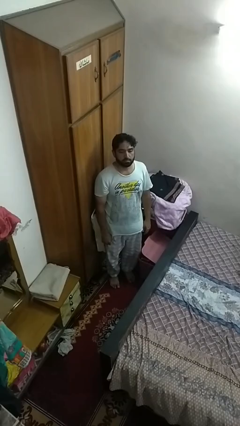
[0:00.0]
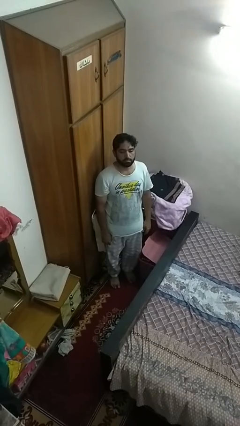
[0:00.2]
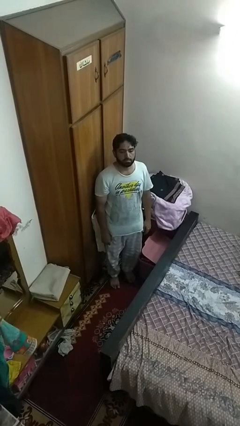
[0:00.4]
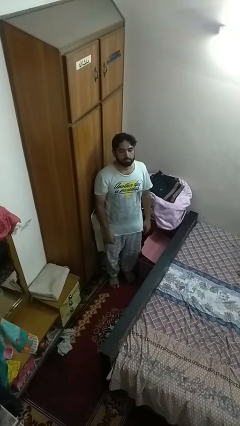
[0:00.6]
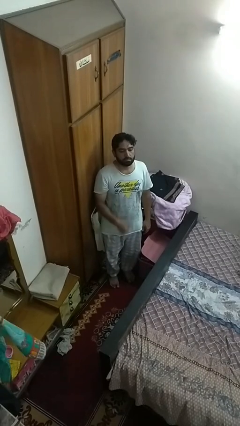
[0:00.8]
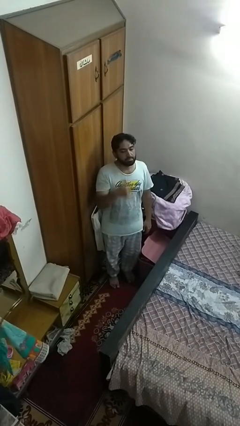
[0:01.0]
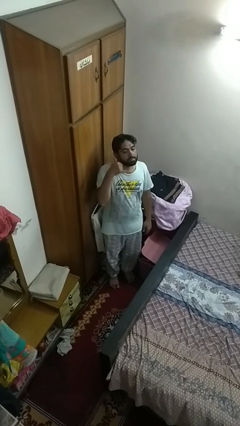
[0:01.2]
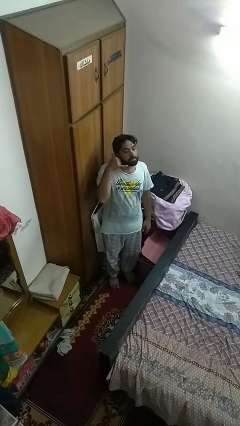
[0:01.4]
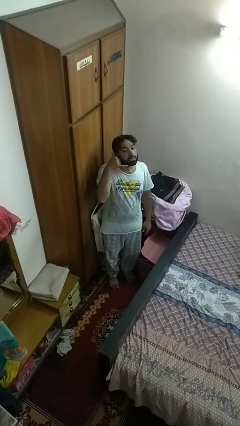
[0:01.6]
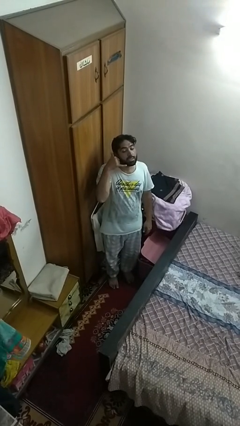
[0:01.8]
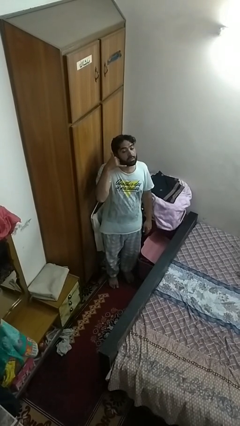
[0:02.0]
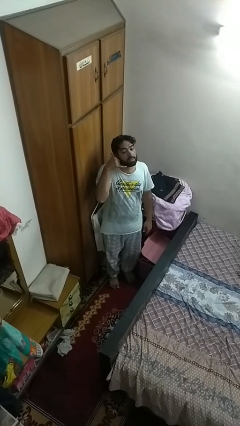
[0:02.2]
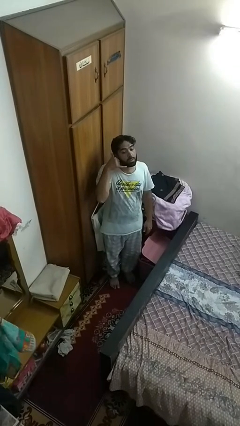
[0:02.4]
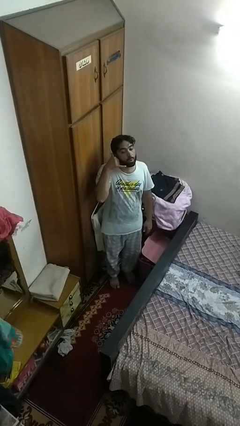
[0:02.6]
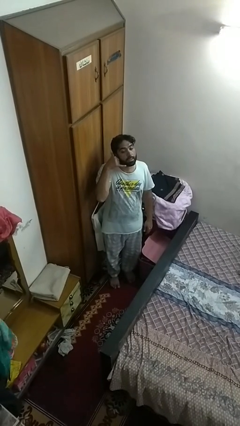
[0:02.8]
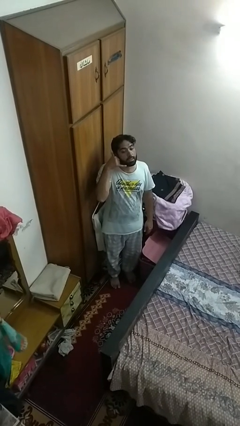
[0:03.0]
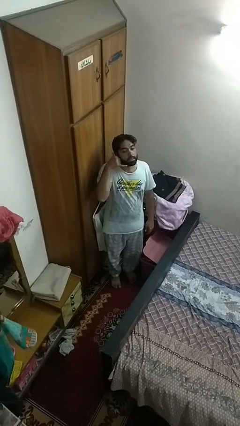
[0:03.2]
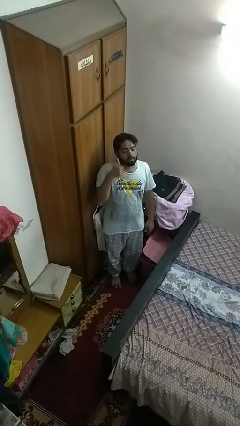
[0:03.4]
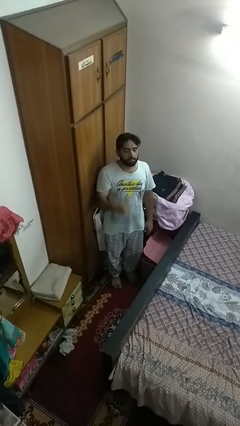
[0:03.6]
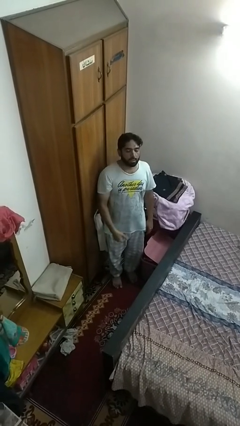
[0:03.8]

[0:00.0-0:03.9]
person gestures call me

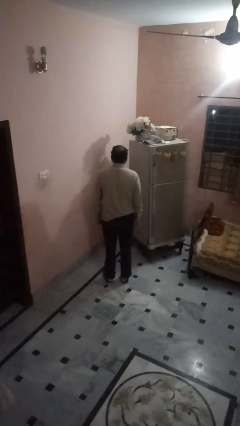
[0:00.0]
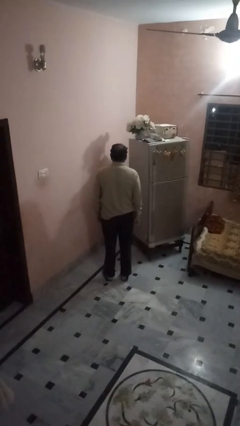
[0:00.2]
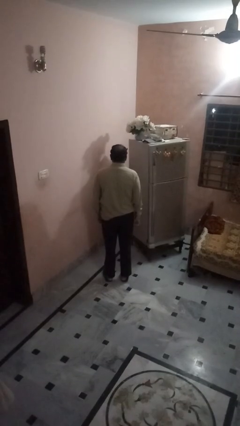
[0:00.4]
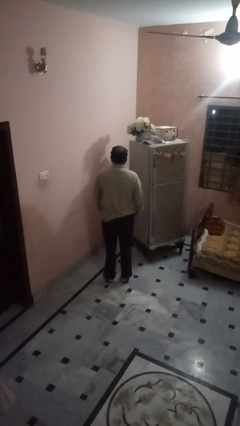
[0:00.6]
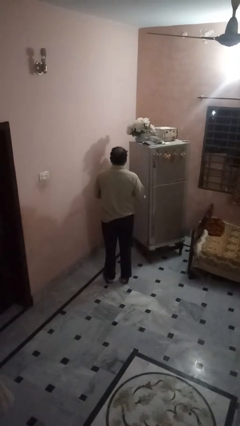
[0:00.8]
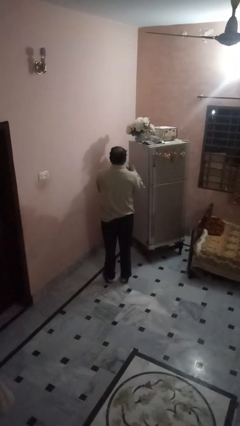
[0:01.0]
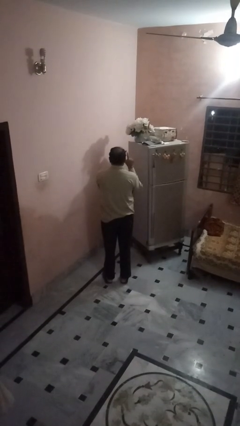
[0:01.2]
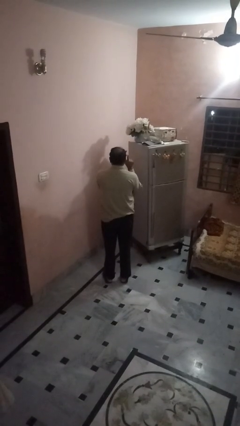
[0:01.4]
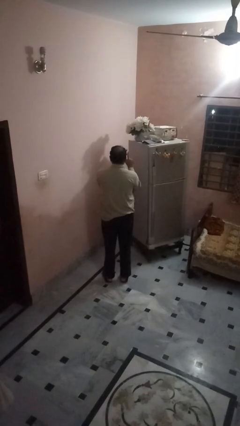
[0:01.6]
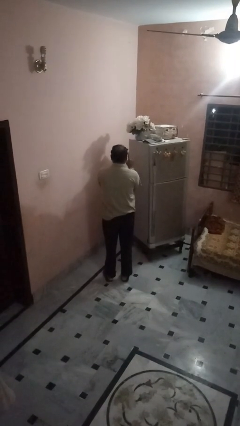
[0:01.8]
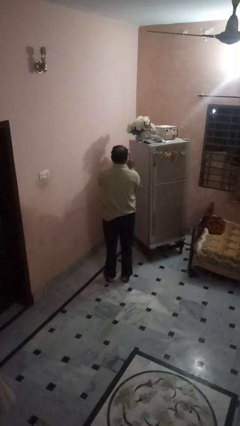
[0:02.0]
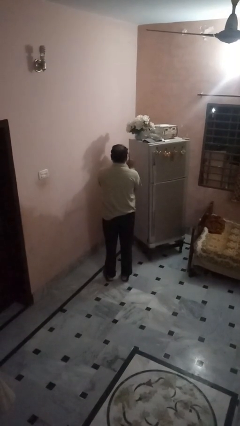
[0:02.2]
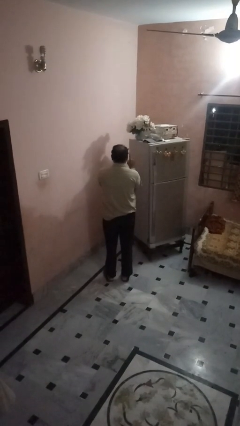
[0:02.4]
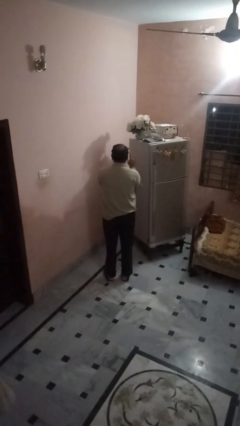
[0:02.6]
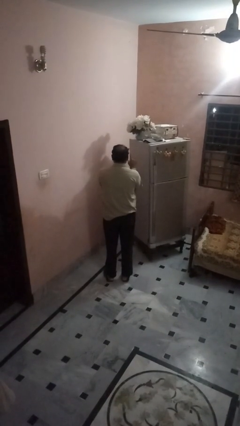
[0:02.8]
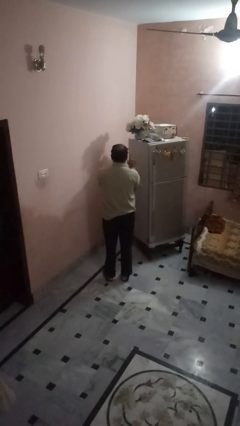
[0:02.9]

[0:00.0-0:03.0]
person gestures number one

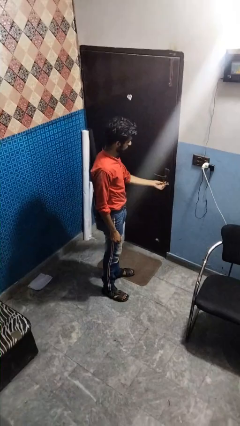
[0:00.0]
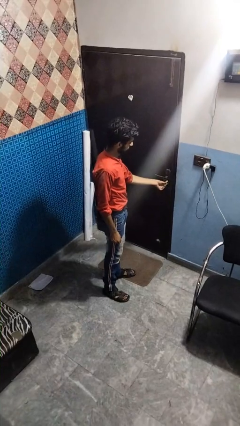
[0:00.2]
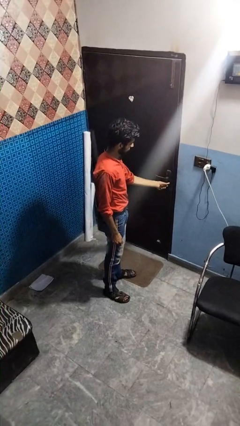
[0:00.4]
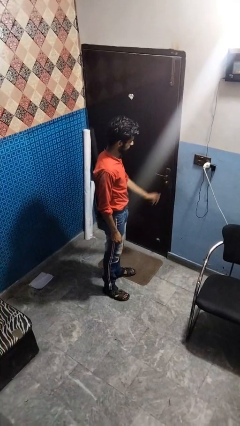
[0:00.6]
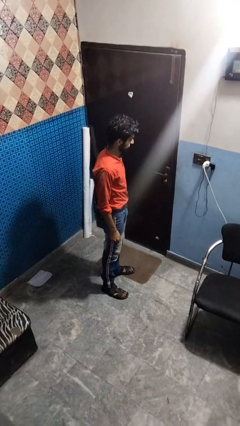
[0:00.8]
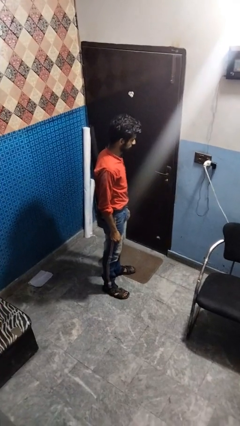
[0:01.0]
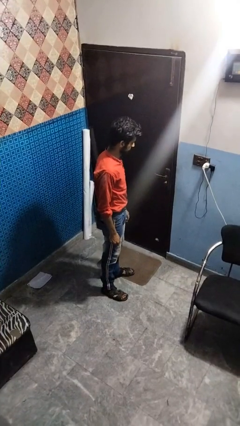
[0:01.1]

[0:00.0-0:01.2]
person locks door with keys

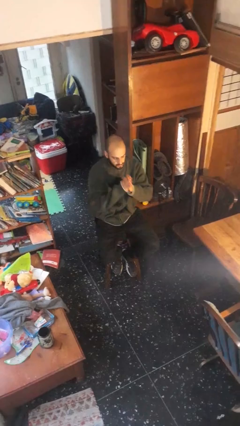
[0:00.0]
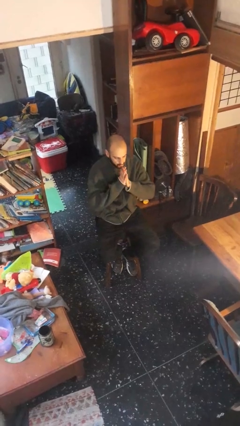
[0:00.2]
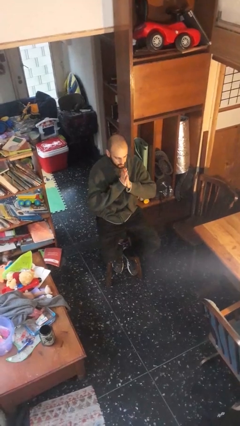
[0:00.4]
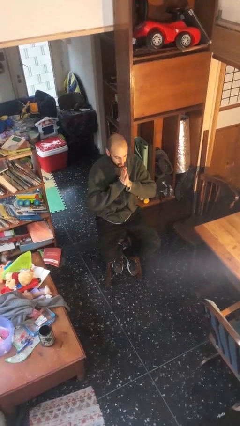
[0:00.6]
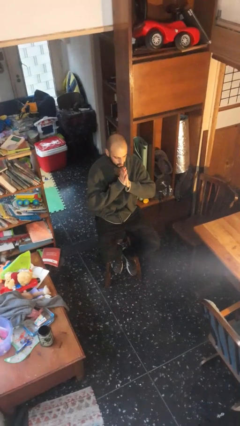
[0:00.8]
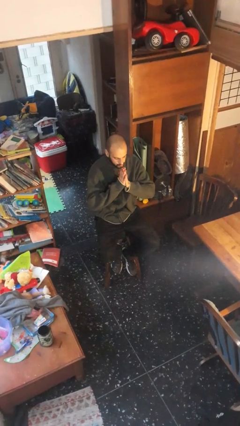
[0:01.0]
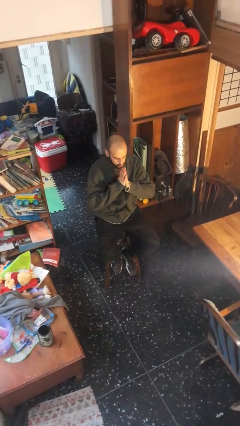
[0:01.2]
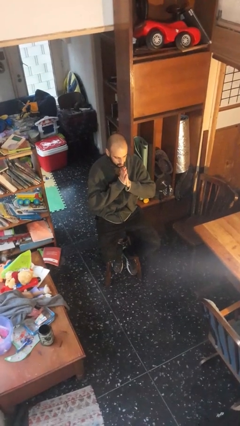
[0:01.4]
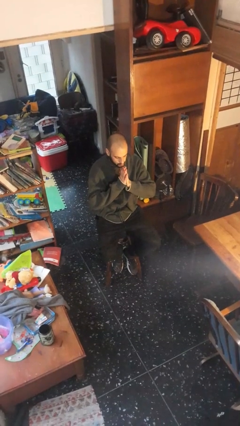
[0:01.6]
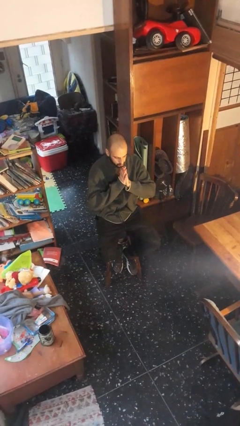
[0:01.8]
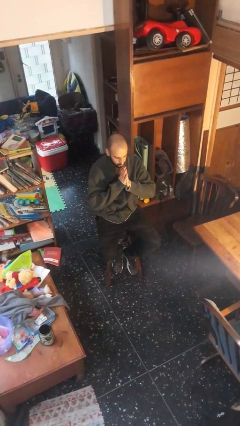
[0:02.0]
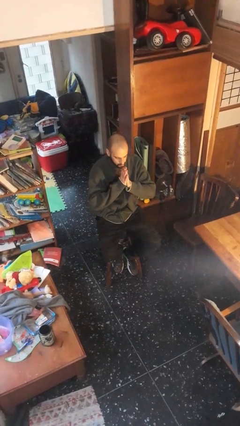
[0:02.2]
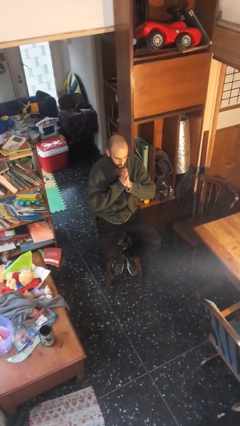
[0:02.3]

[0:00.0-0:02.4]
person prays

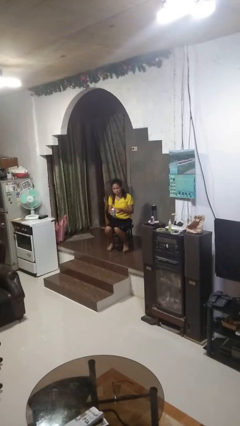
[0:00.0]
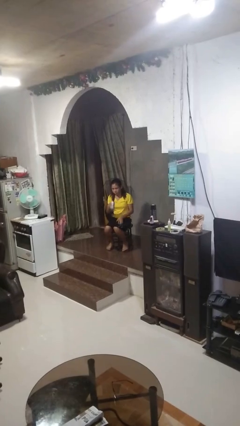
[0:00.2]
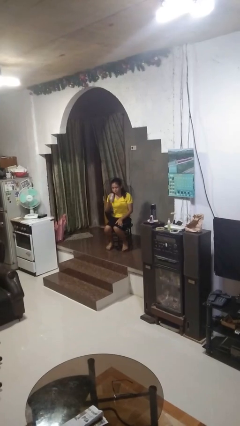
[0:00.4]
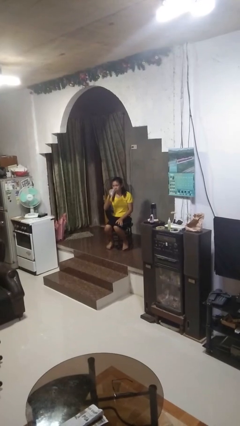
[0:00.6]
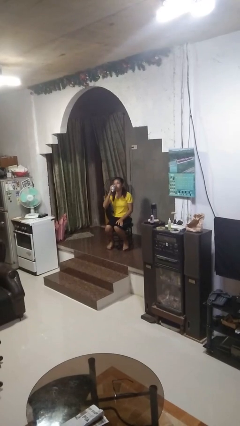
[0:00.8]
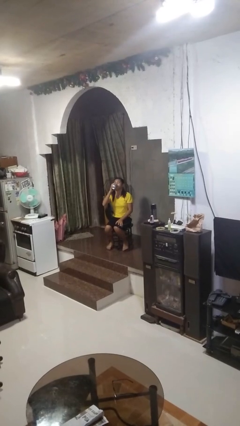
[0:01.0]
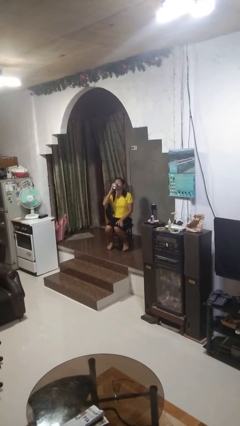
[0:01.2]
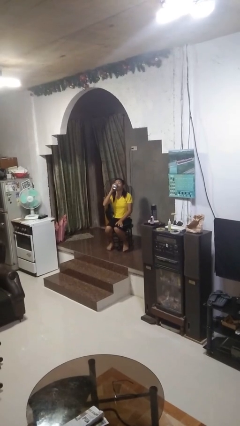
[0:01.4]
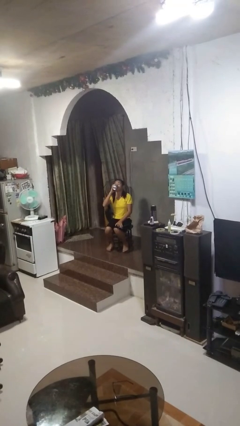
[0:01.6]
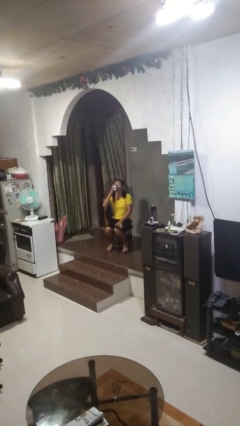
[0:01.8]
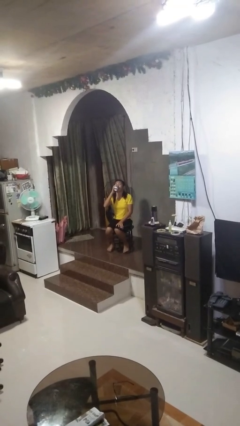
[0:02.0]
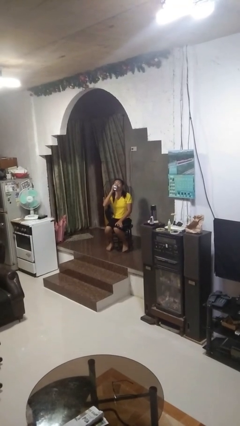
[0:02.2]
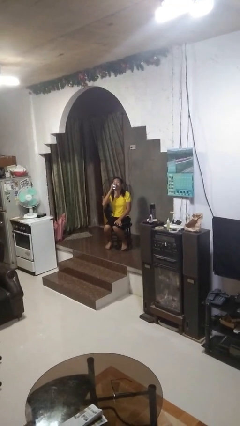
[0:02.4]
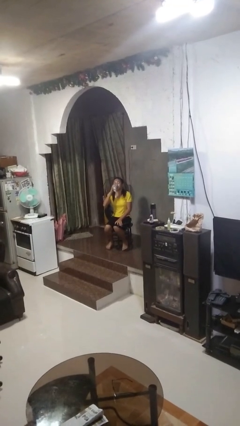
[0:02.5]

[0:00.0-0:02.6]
person drinks from beverage can

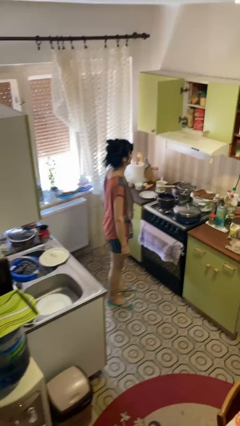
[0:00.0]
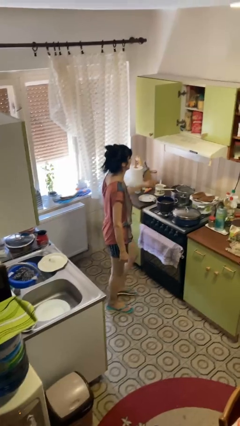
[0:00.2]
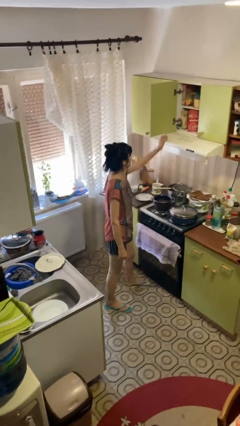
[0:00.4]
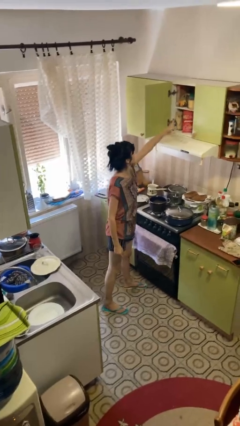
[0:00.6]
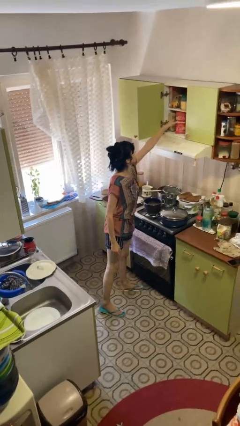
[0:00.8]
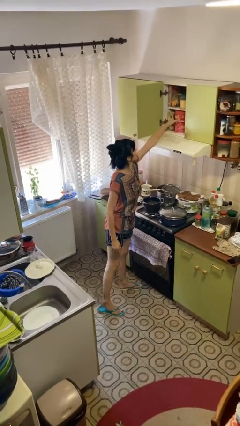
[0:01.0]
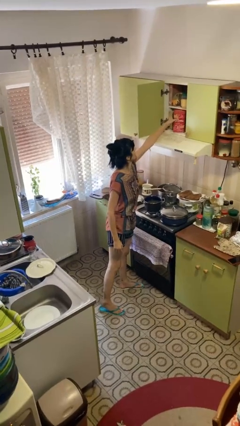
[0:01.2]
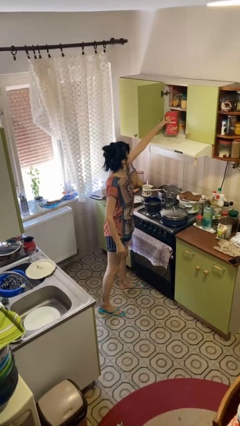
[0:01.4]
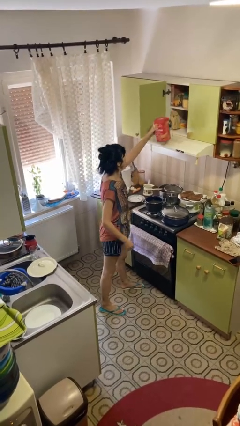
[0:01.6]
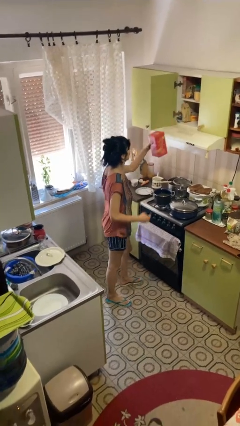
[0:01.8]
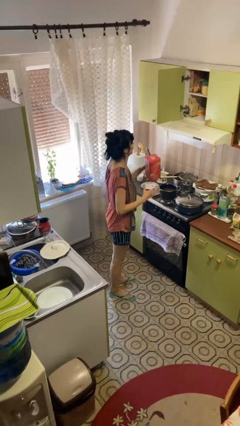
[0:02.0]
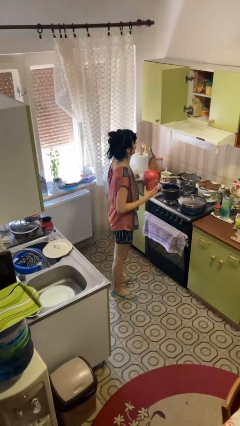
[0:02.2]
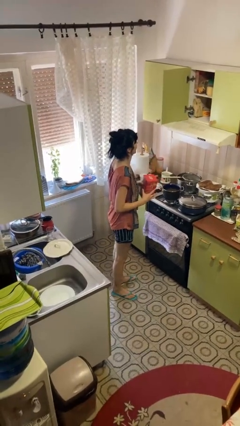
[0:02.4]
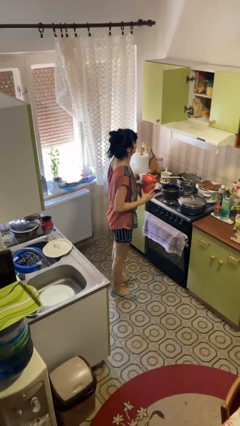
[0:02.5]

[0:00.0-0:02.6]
person picks up object from cabinet

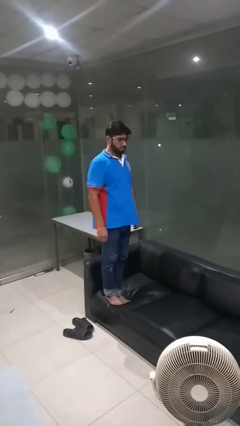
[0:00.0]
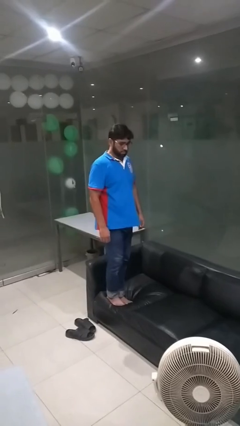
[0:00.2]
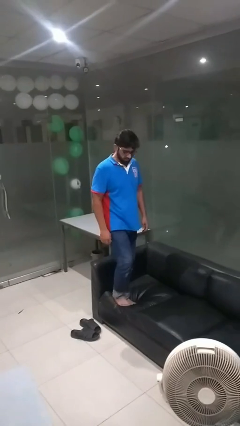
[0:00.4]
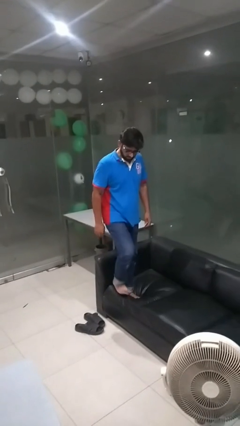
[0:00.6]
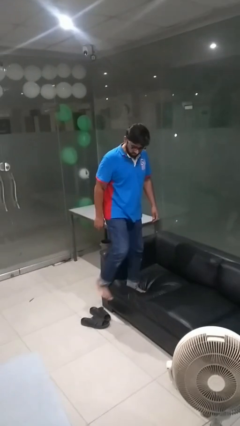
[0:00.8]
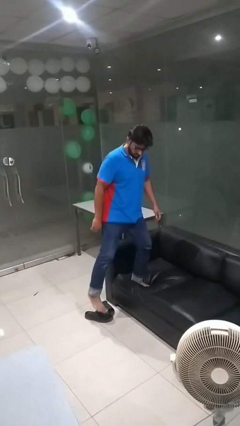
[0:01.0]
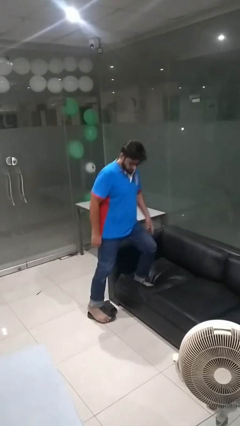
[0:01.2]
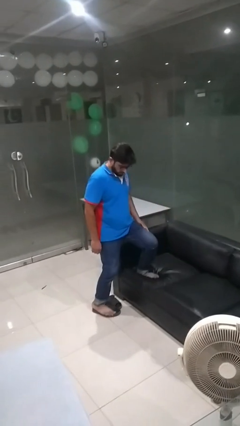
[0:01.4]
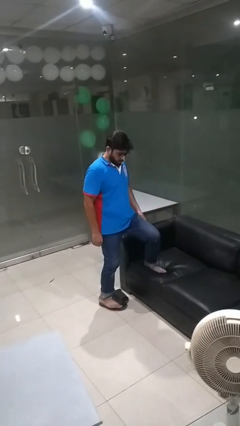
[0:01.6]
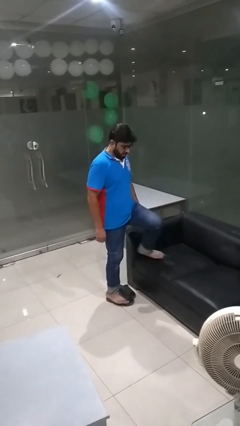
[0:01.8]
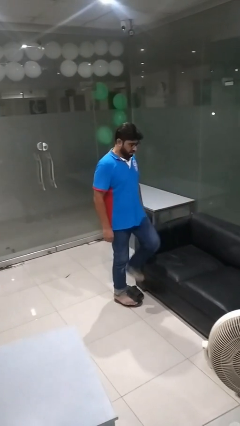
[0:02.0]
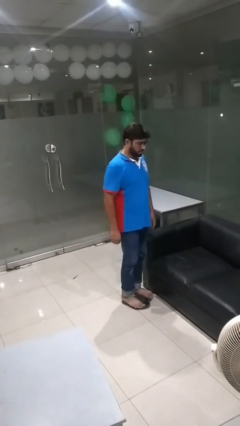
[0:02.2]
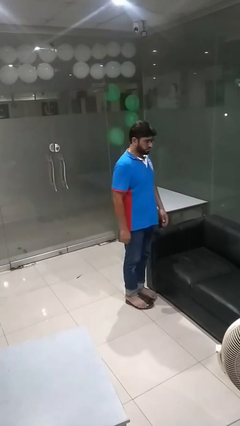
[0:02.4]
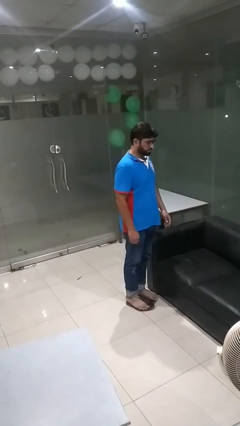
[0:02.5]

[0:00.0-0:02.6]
person climbs off couch
